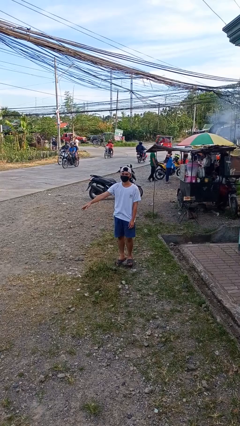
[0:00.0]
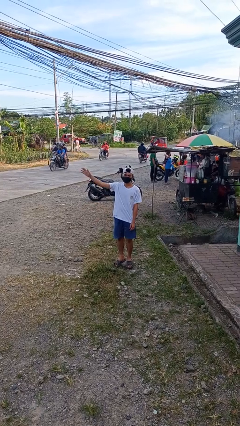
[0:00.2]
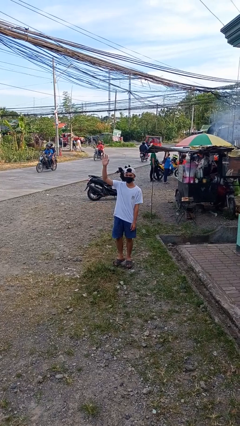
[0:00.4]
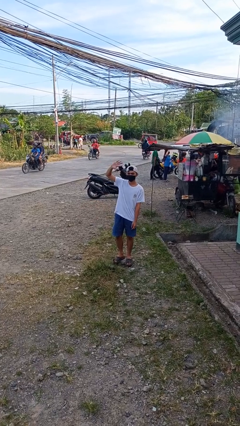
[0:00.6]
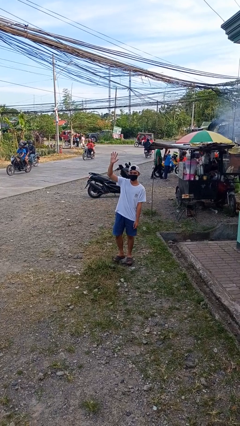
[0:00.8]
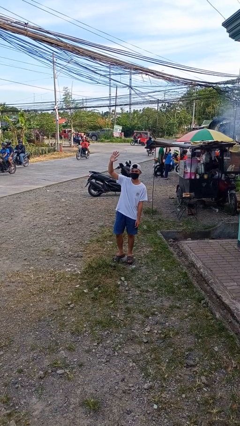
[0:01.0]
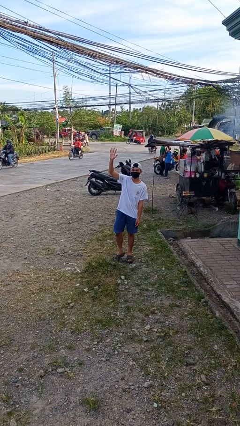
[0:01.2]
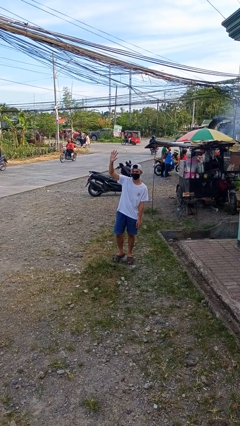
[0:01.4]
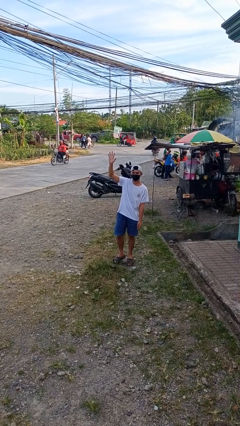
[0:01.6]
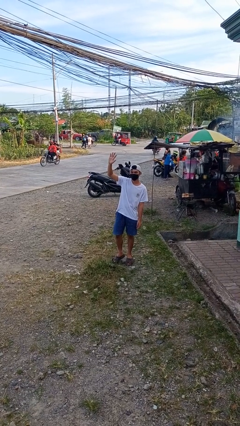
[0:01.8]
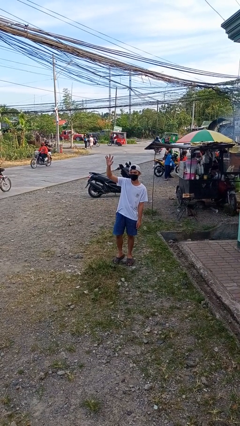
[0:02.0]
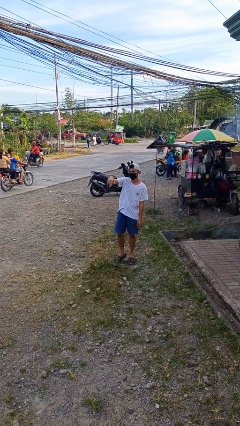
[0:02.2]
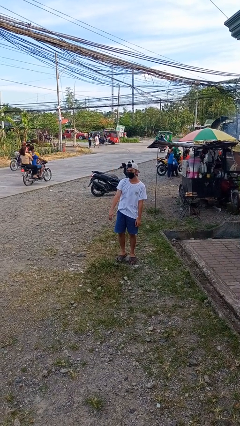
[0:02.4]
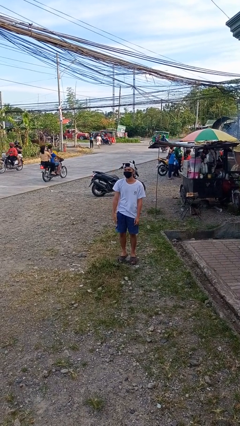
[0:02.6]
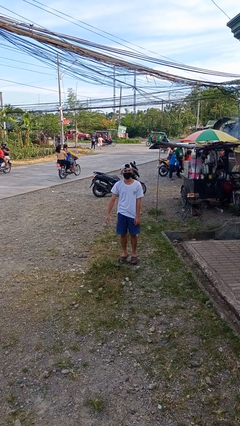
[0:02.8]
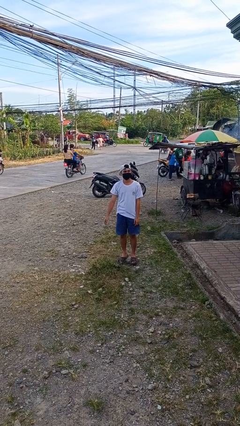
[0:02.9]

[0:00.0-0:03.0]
person waves at person

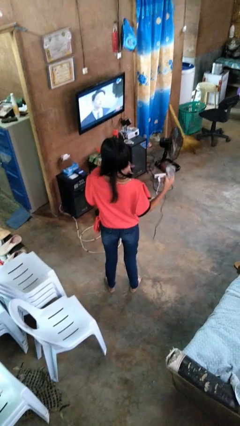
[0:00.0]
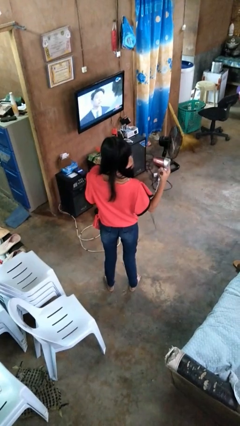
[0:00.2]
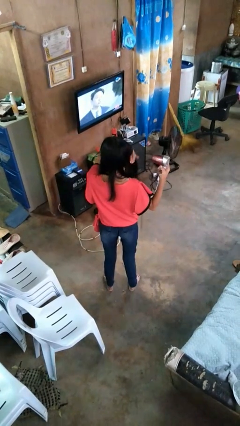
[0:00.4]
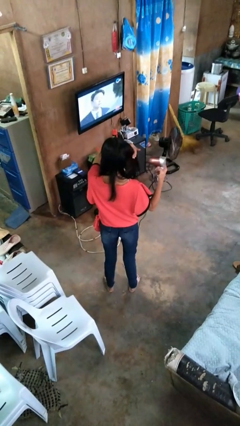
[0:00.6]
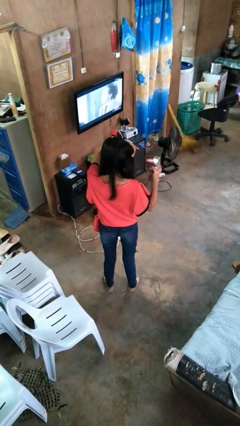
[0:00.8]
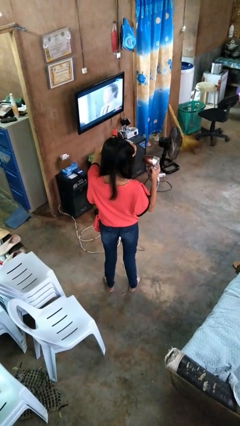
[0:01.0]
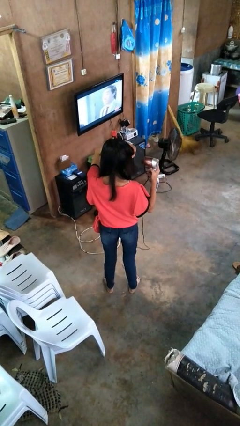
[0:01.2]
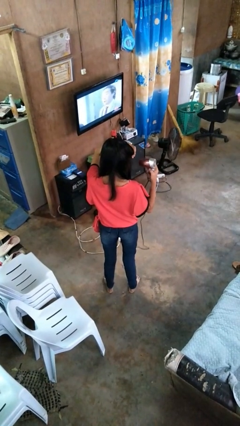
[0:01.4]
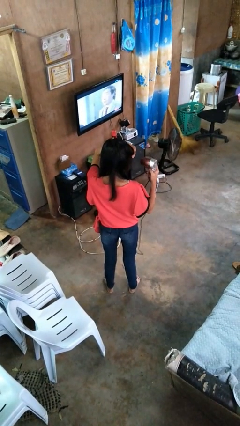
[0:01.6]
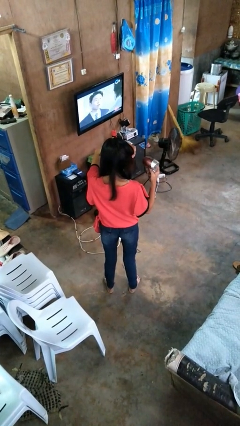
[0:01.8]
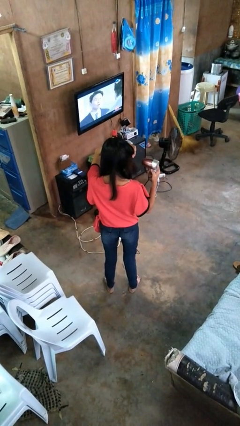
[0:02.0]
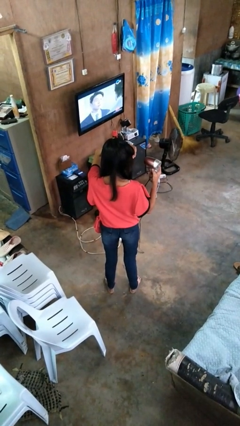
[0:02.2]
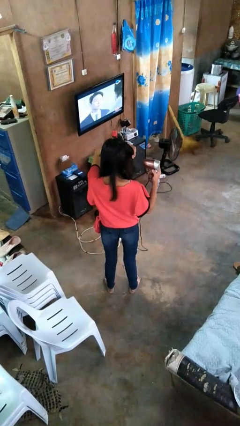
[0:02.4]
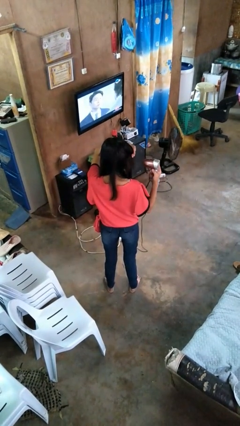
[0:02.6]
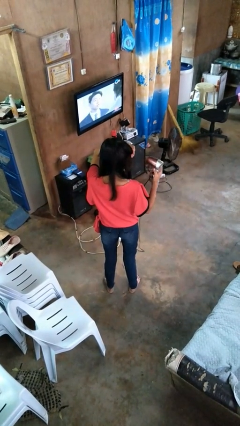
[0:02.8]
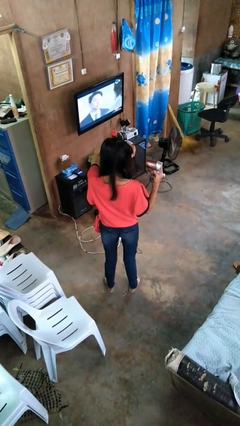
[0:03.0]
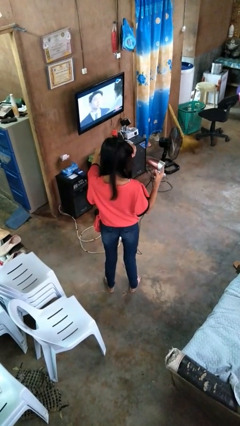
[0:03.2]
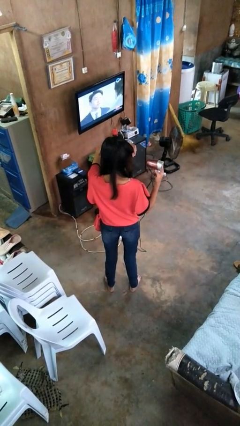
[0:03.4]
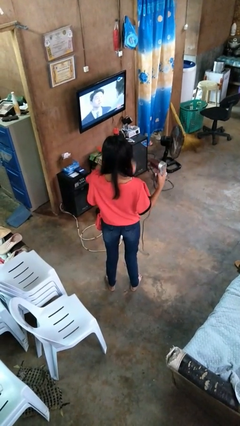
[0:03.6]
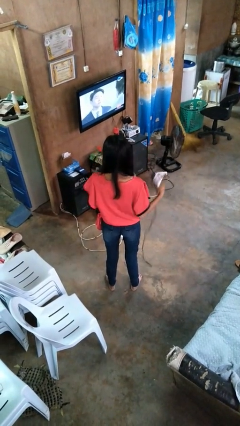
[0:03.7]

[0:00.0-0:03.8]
person dries hair with hairdryer

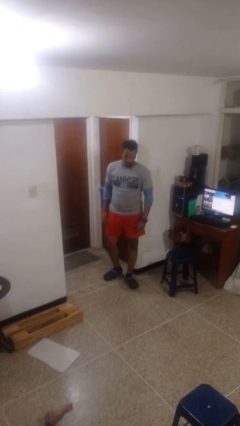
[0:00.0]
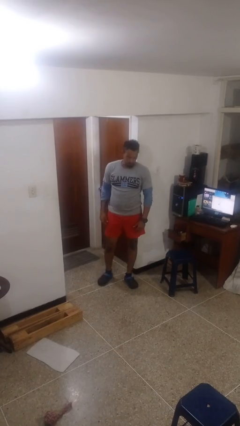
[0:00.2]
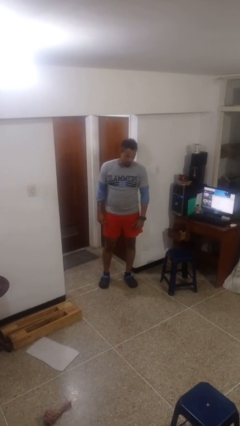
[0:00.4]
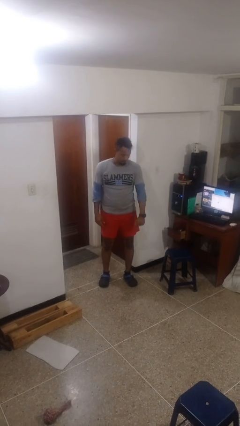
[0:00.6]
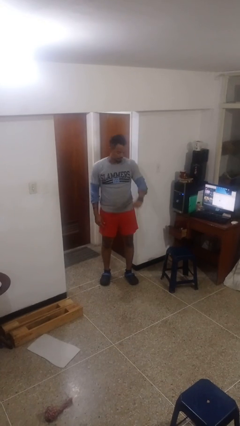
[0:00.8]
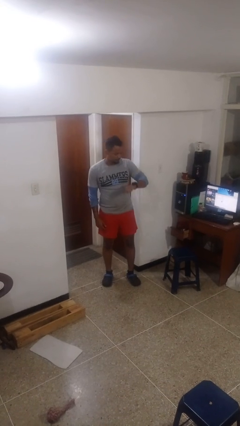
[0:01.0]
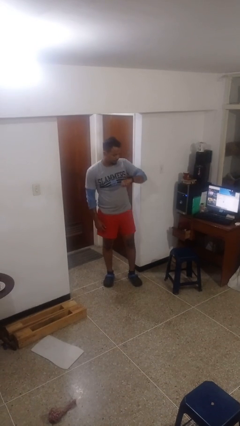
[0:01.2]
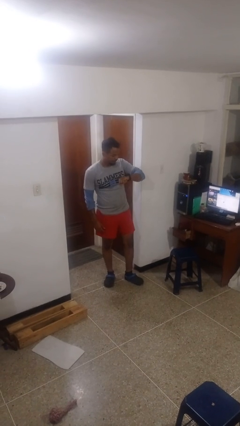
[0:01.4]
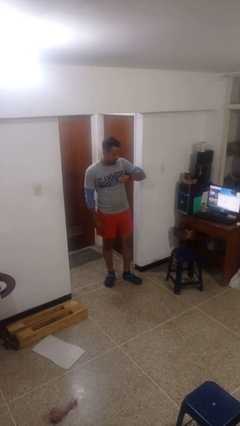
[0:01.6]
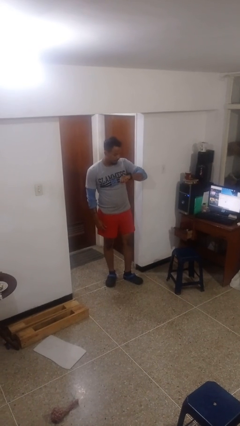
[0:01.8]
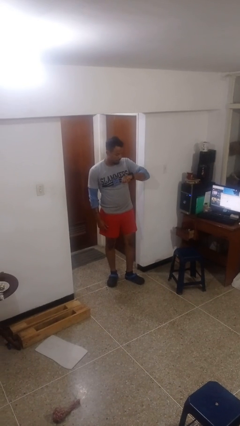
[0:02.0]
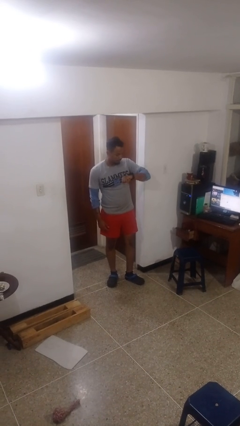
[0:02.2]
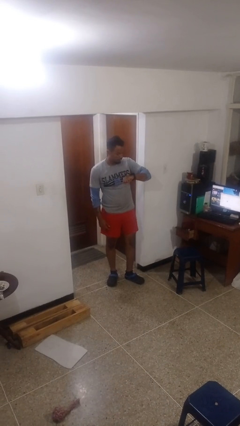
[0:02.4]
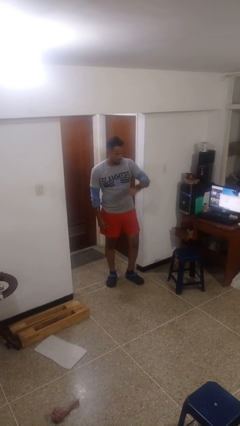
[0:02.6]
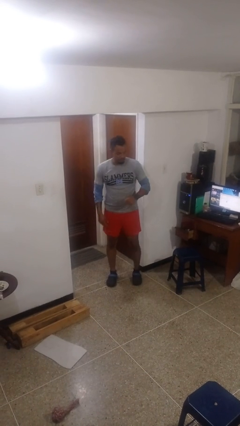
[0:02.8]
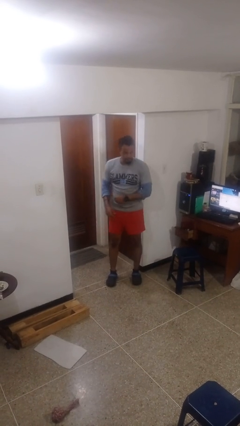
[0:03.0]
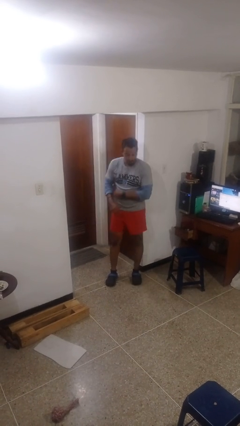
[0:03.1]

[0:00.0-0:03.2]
person looks at wristwatch

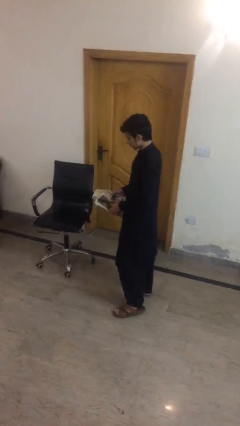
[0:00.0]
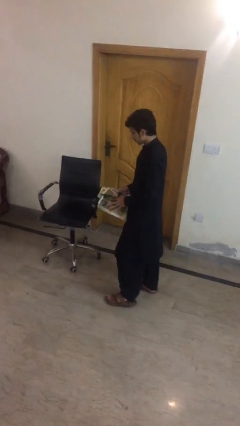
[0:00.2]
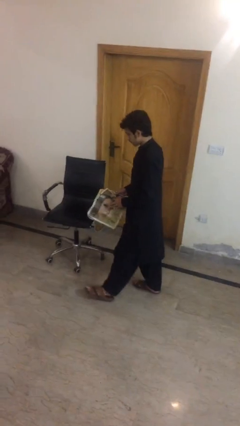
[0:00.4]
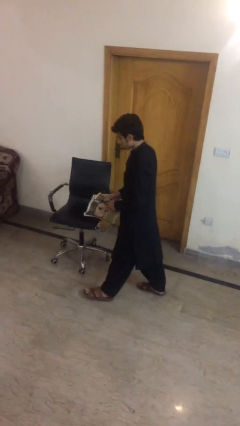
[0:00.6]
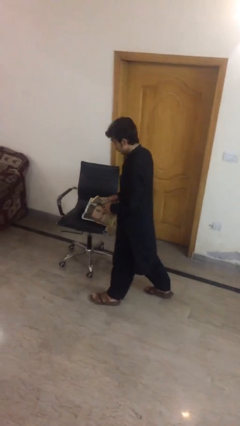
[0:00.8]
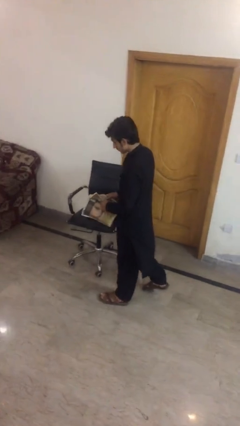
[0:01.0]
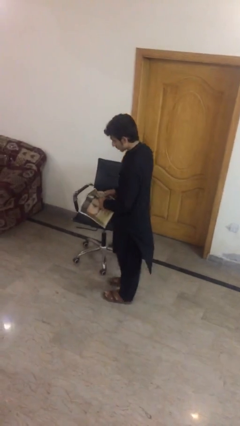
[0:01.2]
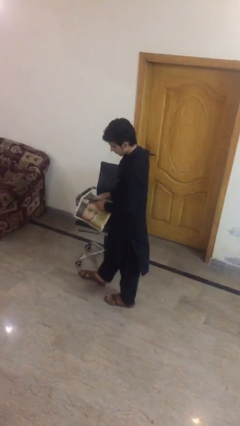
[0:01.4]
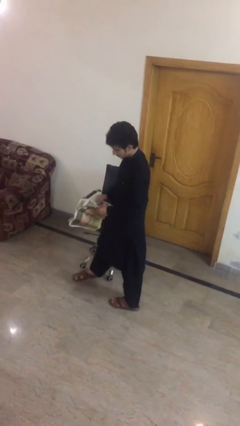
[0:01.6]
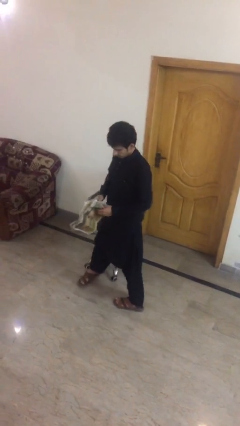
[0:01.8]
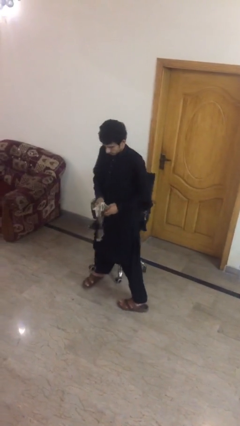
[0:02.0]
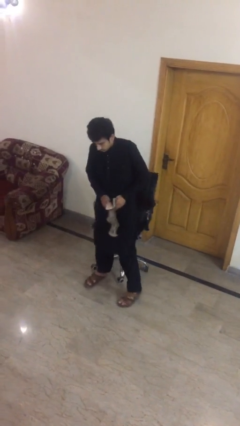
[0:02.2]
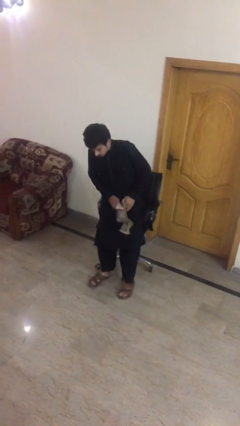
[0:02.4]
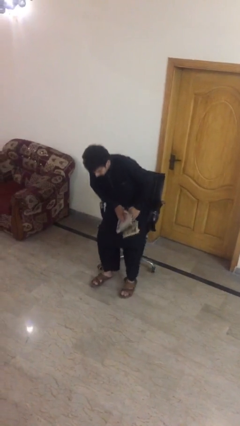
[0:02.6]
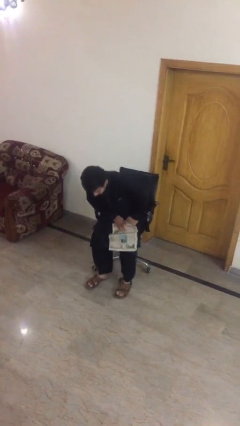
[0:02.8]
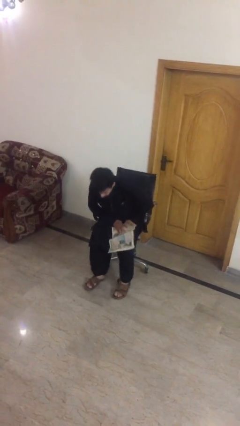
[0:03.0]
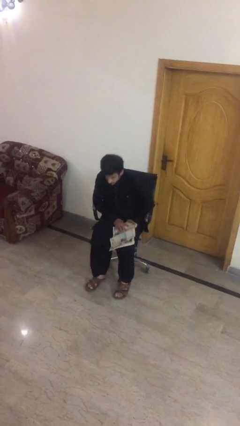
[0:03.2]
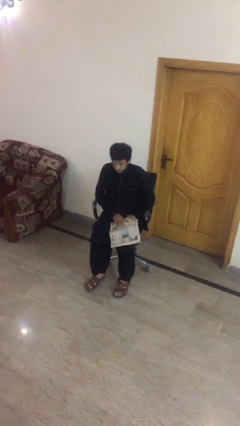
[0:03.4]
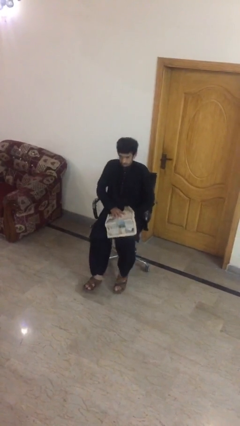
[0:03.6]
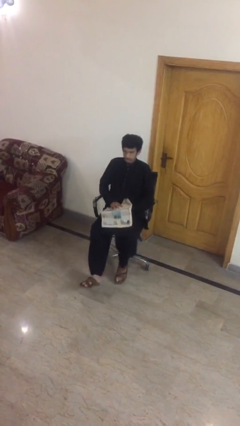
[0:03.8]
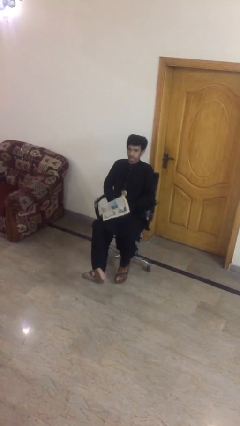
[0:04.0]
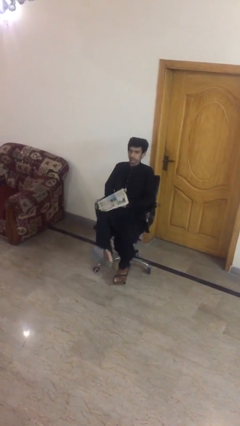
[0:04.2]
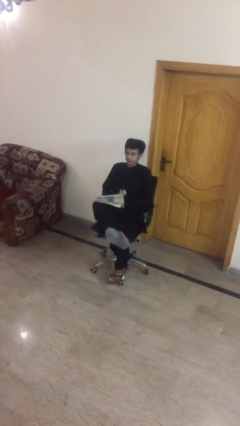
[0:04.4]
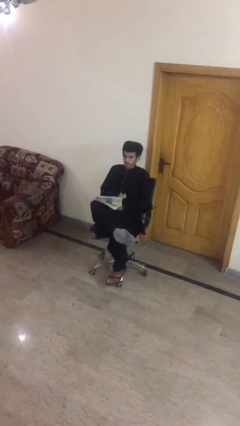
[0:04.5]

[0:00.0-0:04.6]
person sits down

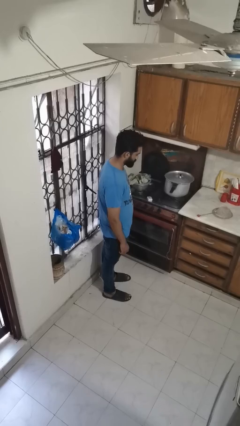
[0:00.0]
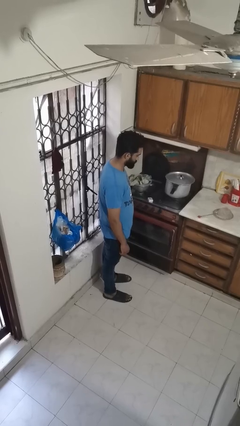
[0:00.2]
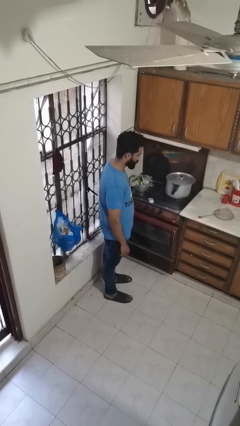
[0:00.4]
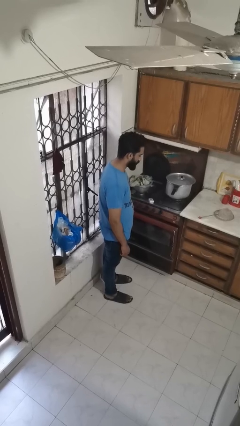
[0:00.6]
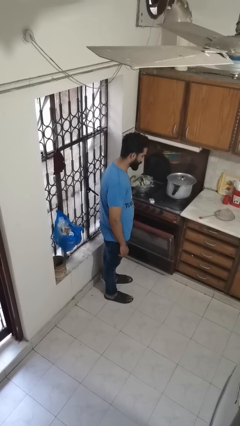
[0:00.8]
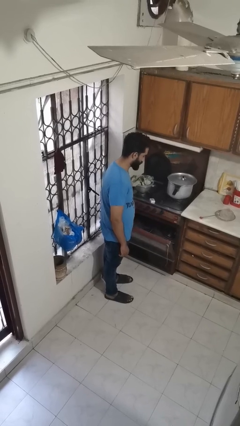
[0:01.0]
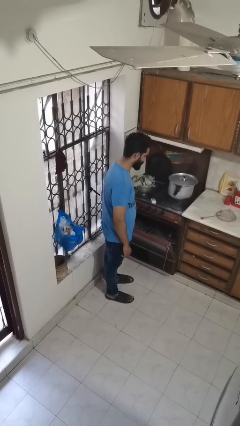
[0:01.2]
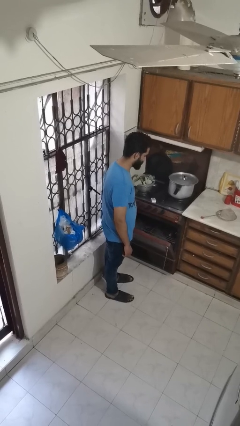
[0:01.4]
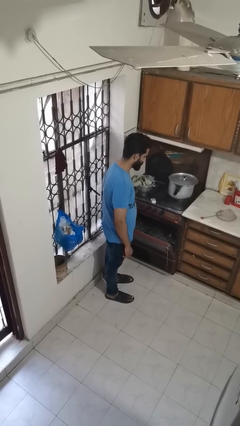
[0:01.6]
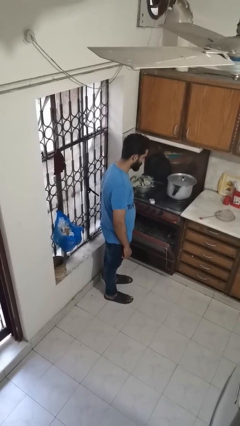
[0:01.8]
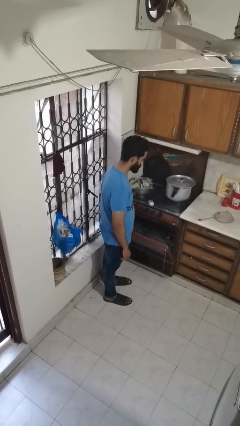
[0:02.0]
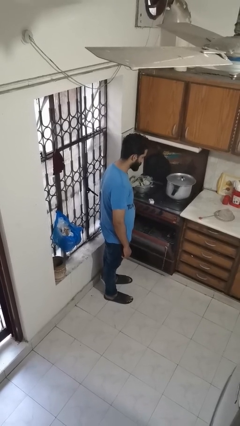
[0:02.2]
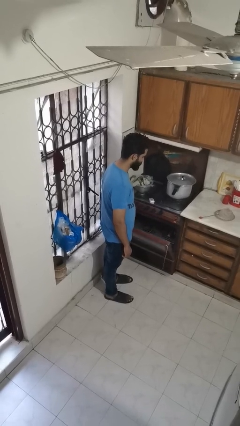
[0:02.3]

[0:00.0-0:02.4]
person opens oven door

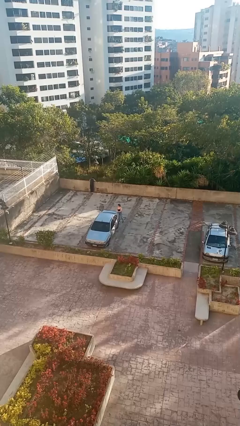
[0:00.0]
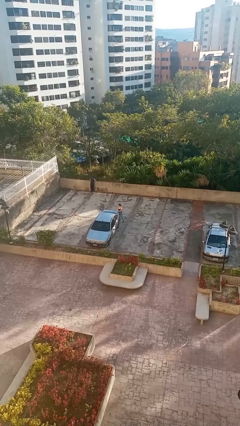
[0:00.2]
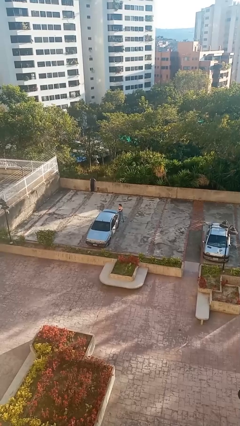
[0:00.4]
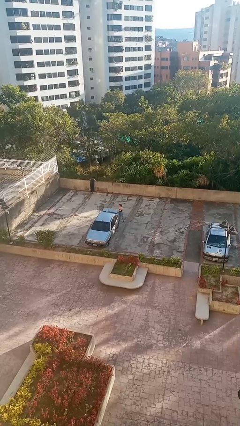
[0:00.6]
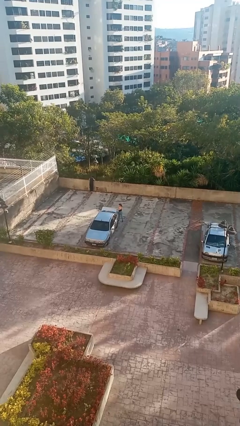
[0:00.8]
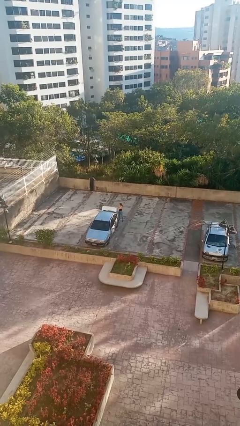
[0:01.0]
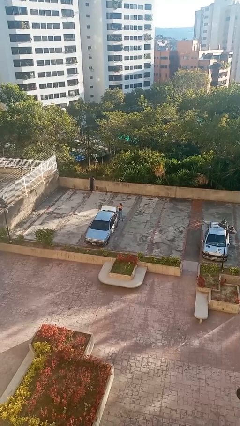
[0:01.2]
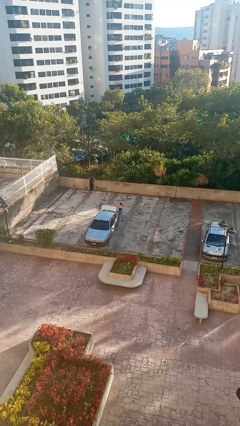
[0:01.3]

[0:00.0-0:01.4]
person opens car trunk
